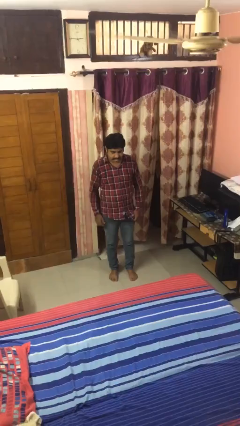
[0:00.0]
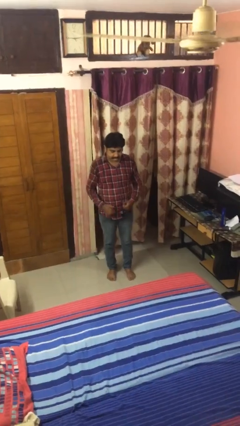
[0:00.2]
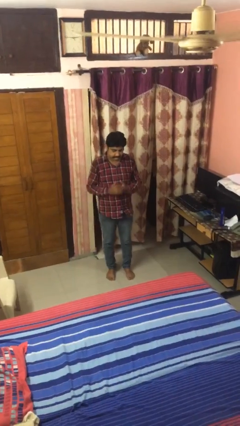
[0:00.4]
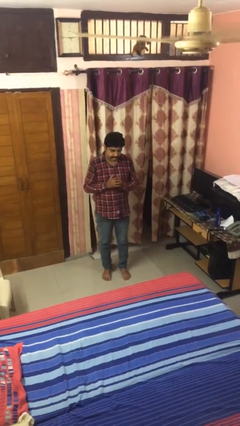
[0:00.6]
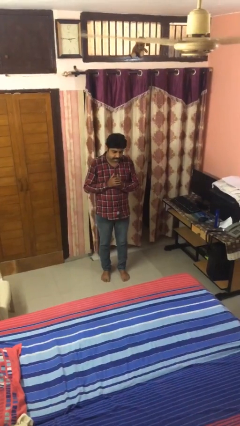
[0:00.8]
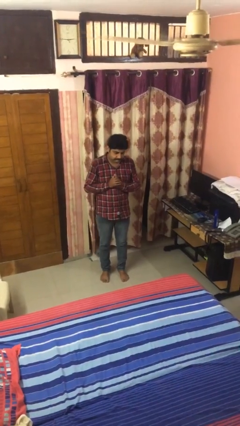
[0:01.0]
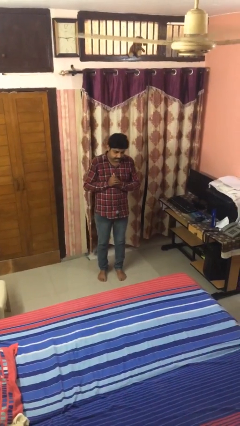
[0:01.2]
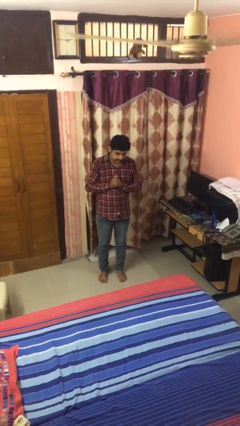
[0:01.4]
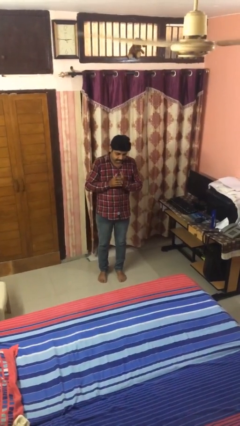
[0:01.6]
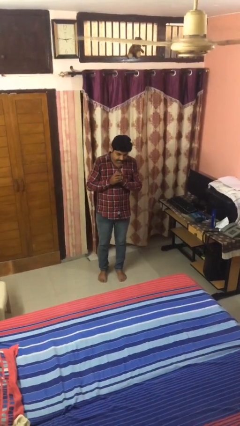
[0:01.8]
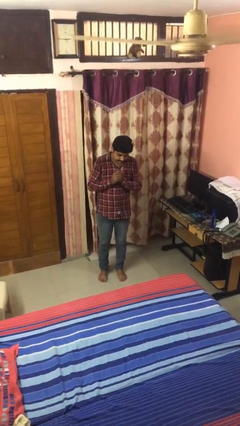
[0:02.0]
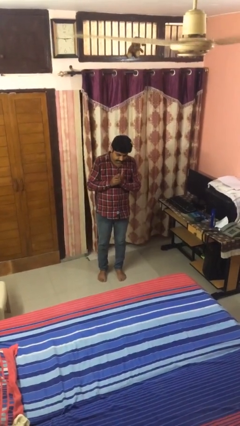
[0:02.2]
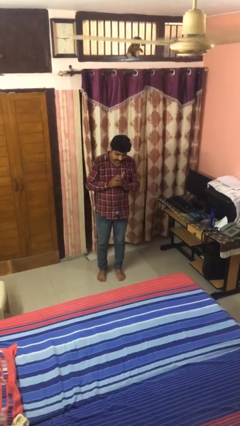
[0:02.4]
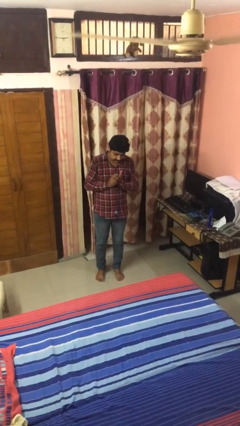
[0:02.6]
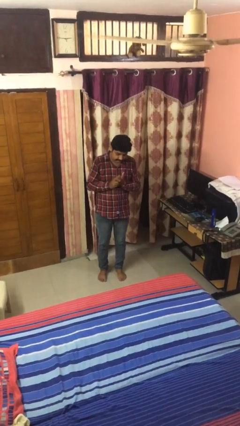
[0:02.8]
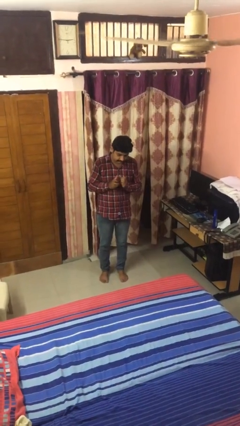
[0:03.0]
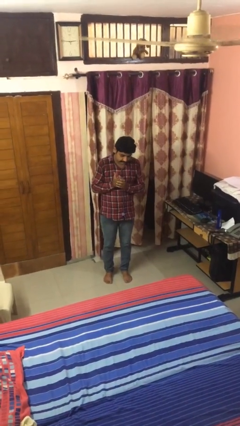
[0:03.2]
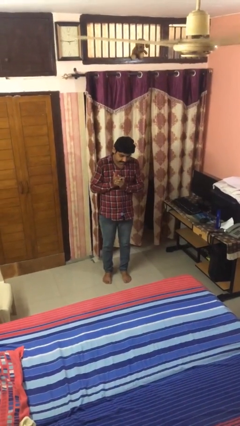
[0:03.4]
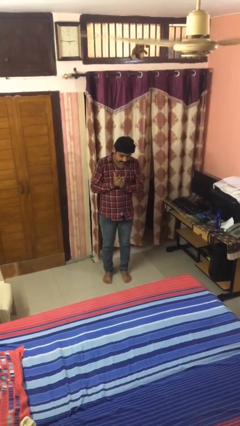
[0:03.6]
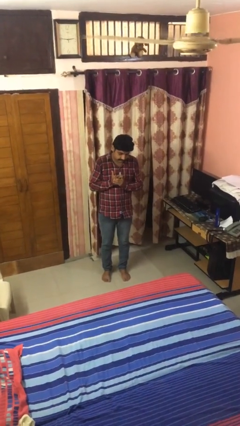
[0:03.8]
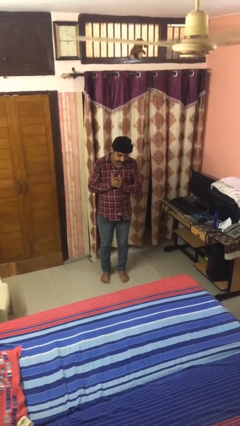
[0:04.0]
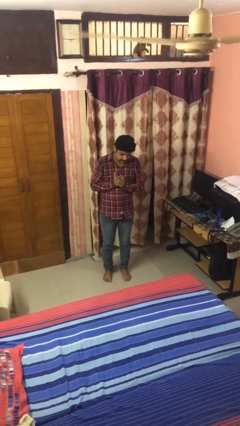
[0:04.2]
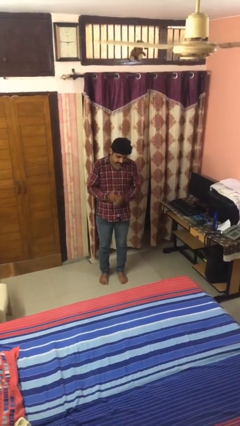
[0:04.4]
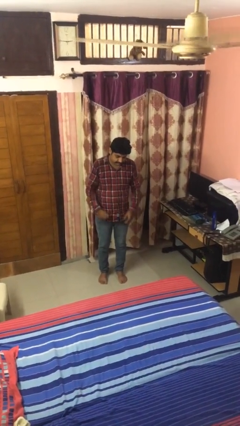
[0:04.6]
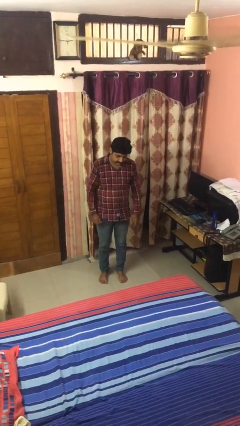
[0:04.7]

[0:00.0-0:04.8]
person cracks knuckles

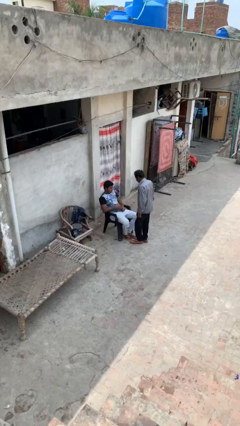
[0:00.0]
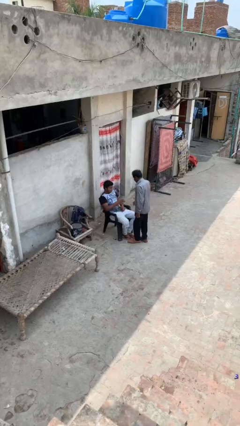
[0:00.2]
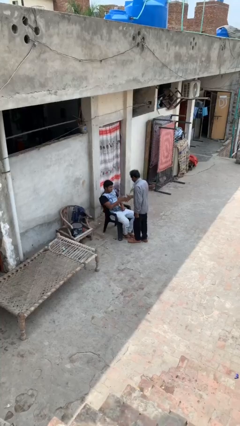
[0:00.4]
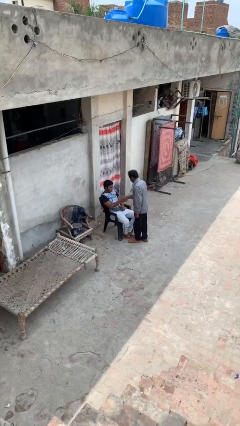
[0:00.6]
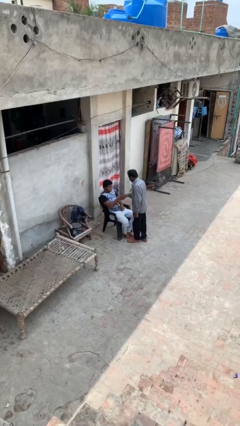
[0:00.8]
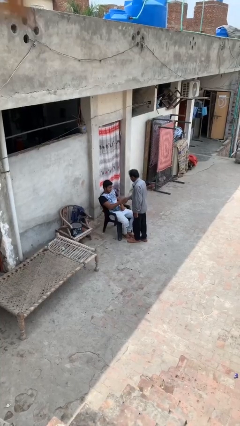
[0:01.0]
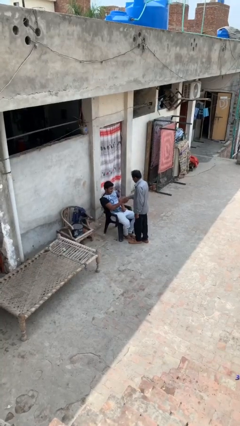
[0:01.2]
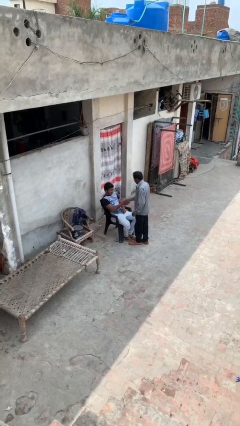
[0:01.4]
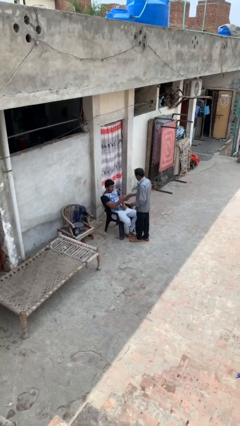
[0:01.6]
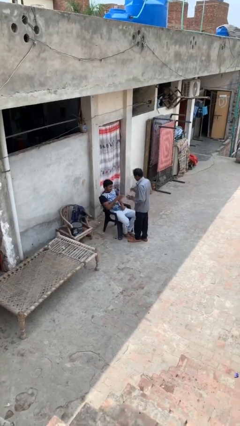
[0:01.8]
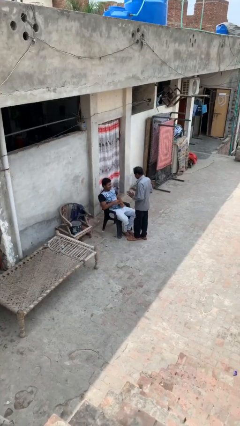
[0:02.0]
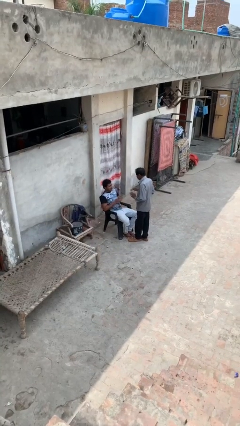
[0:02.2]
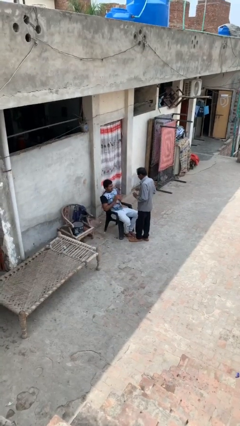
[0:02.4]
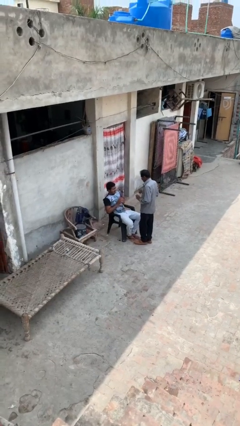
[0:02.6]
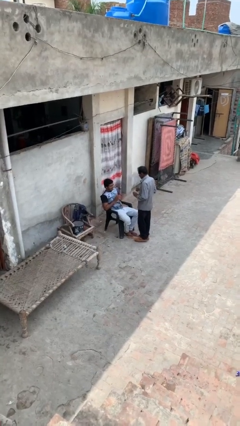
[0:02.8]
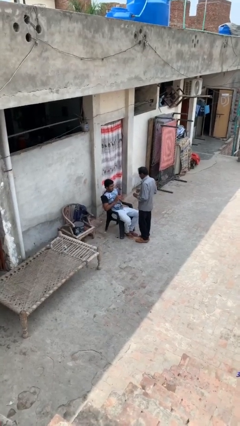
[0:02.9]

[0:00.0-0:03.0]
person shakes hand

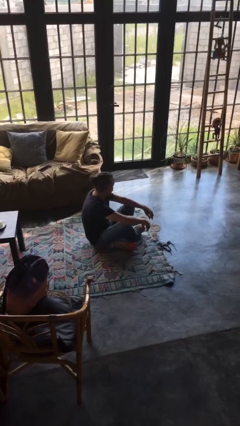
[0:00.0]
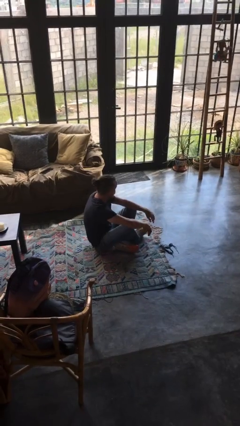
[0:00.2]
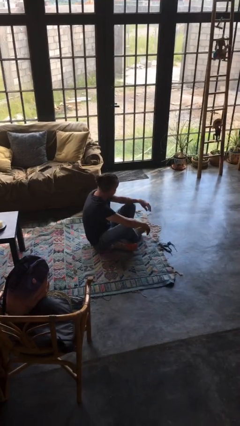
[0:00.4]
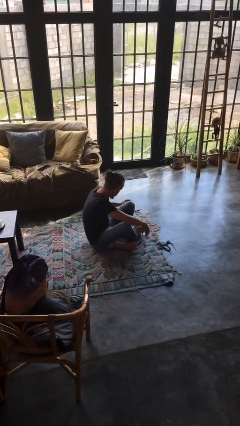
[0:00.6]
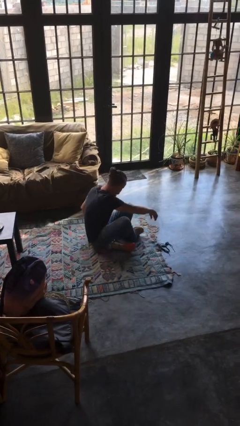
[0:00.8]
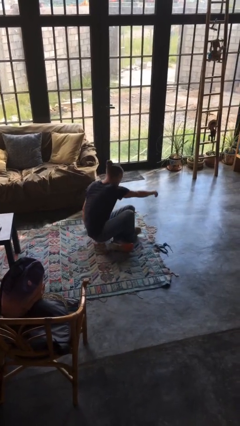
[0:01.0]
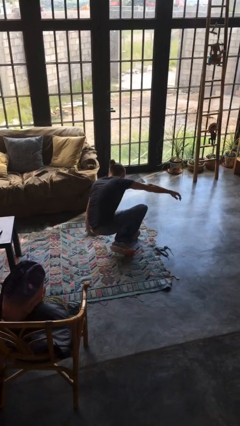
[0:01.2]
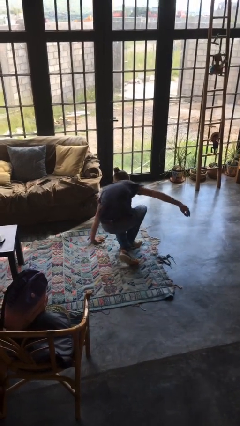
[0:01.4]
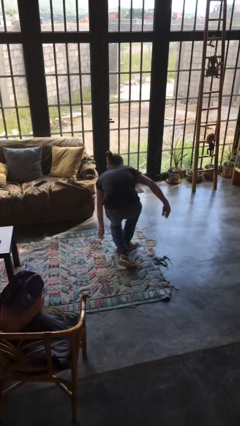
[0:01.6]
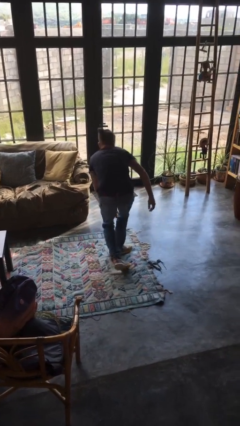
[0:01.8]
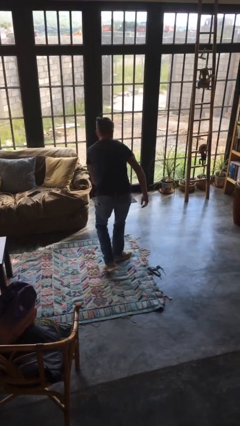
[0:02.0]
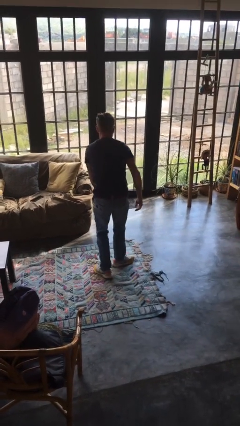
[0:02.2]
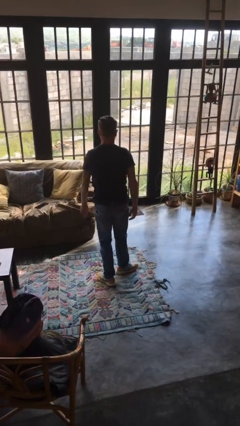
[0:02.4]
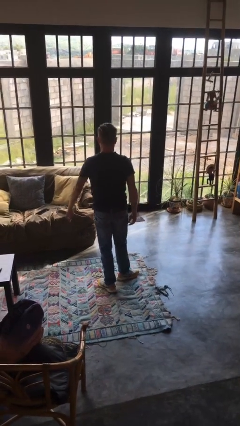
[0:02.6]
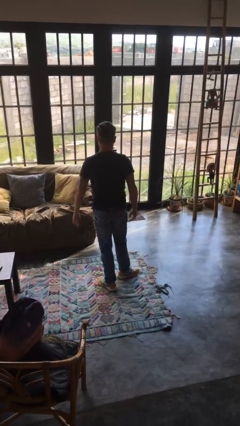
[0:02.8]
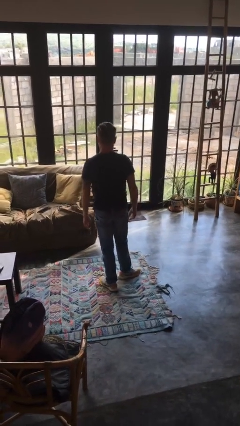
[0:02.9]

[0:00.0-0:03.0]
person stands up from floor

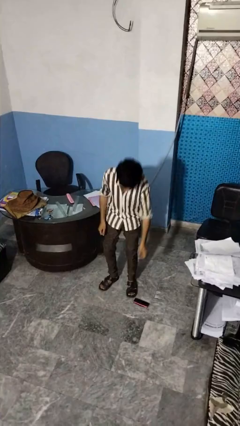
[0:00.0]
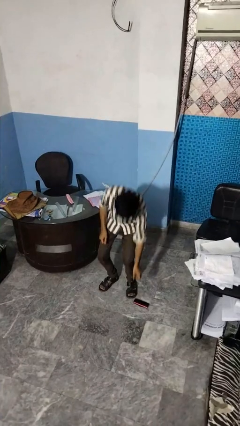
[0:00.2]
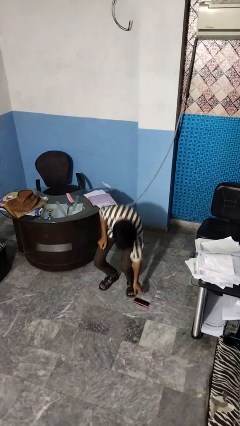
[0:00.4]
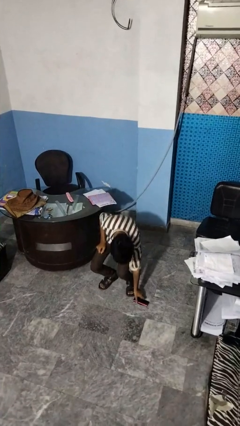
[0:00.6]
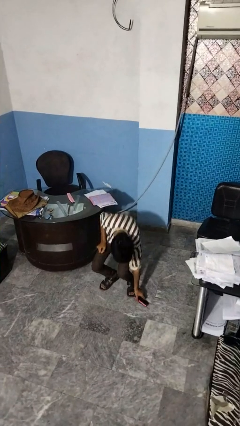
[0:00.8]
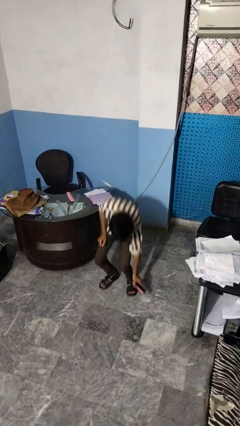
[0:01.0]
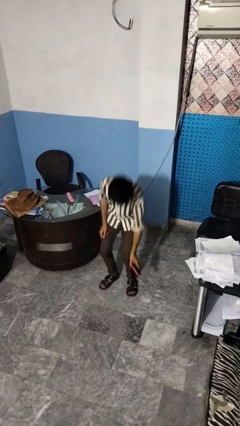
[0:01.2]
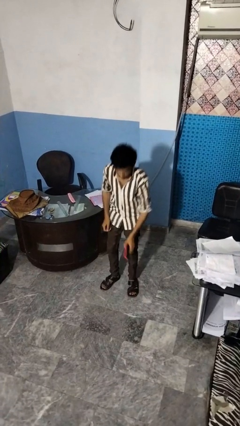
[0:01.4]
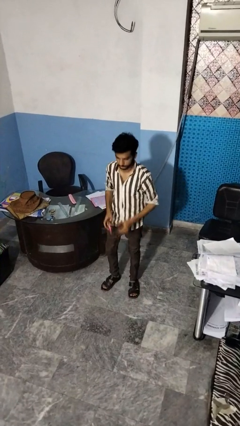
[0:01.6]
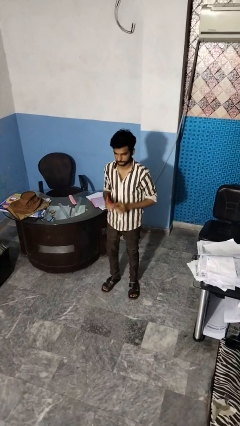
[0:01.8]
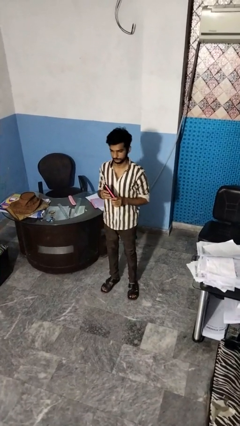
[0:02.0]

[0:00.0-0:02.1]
person picks up object from floor

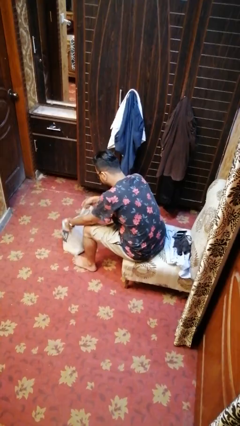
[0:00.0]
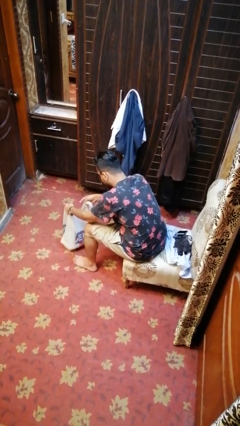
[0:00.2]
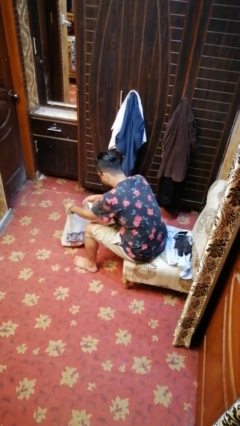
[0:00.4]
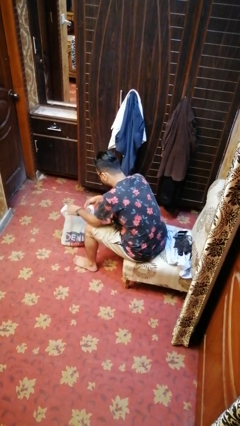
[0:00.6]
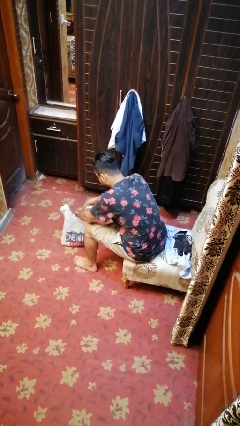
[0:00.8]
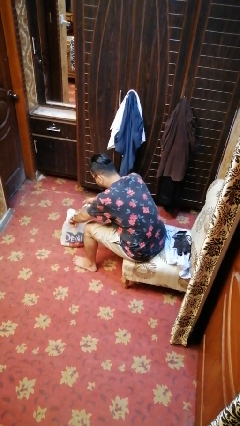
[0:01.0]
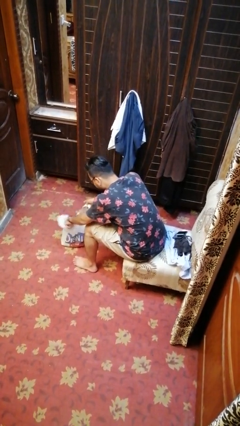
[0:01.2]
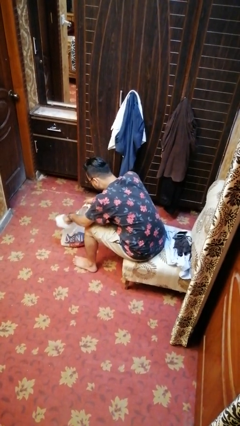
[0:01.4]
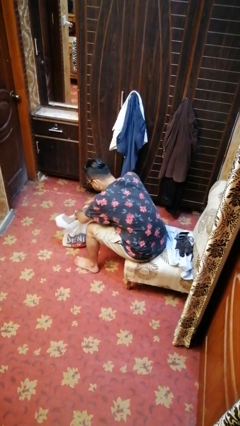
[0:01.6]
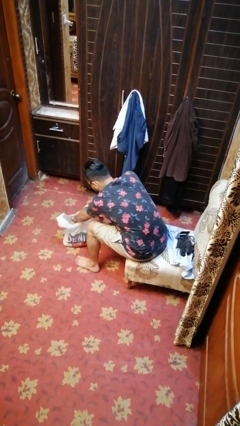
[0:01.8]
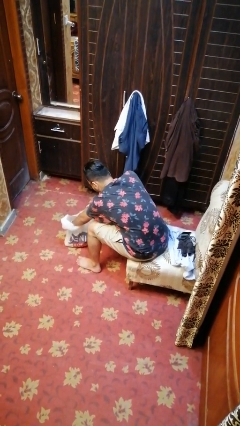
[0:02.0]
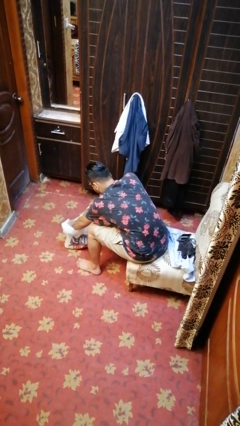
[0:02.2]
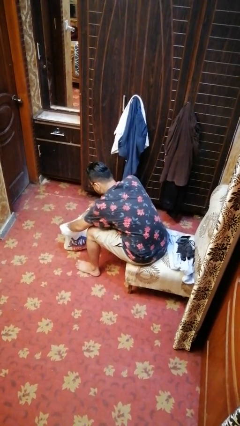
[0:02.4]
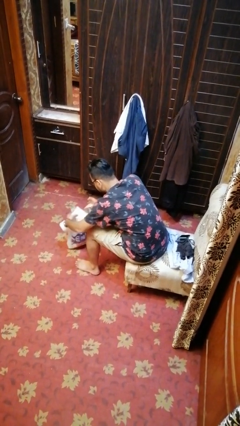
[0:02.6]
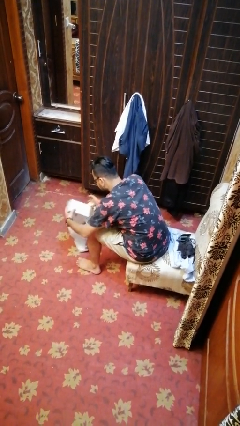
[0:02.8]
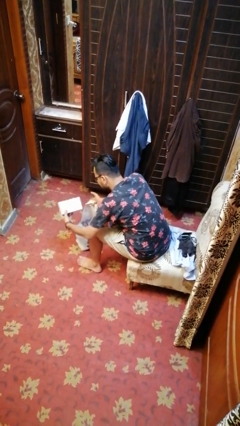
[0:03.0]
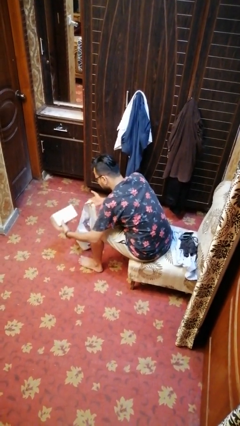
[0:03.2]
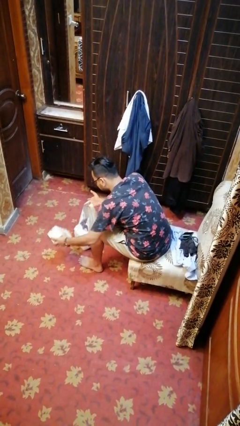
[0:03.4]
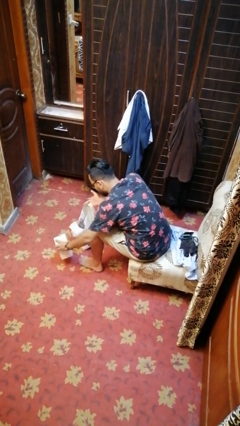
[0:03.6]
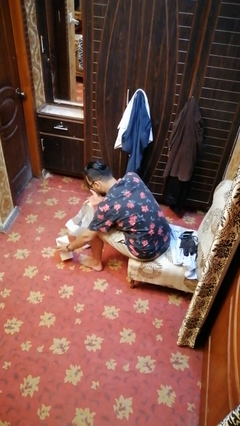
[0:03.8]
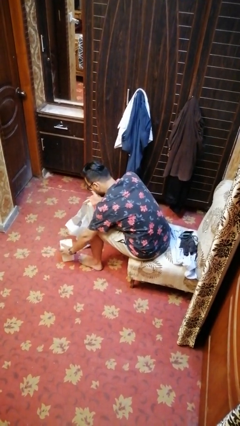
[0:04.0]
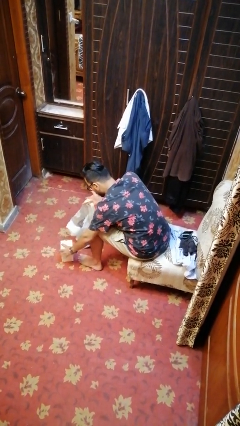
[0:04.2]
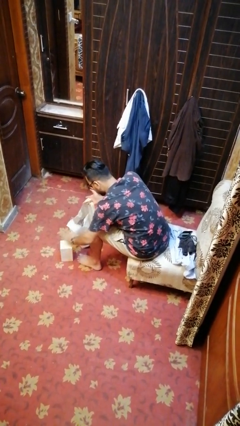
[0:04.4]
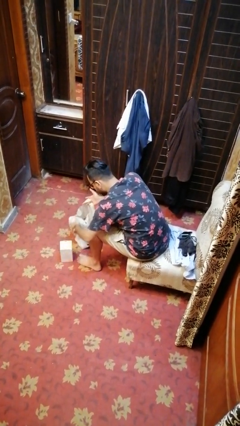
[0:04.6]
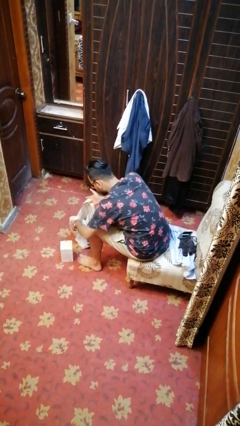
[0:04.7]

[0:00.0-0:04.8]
person takes object from bag
